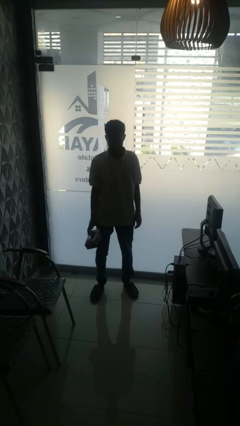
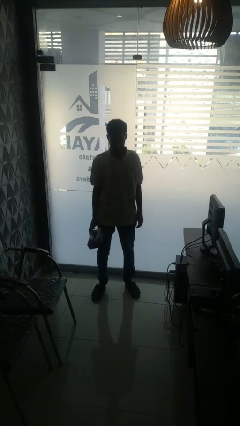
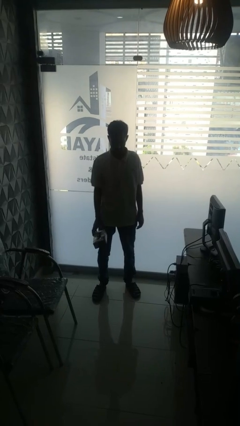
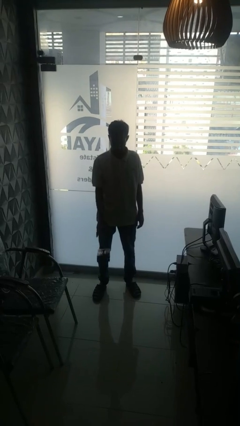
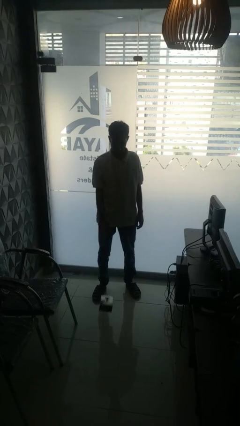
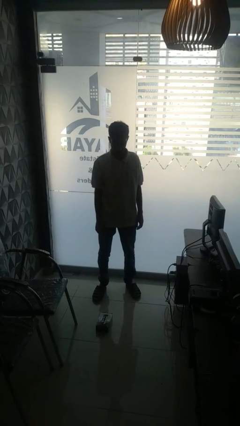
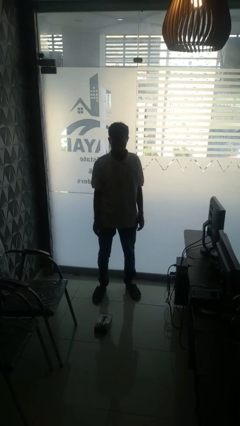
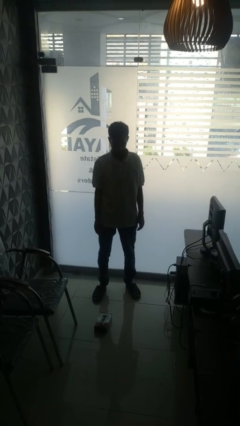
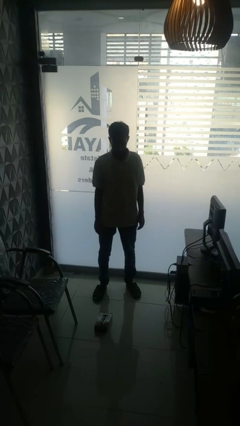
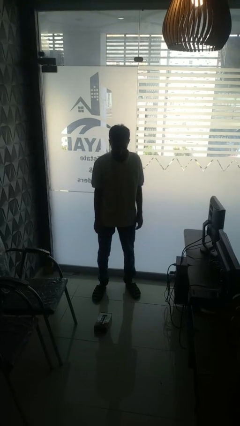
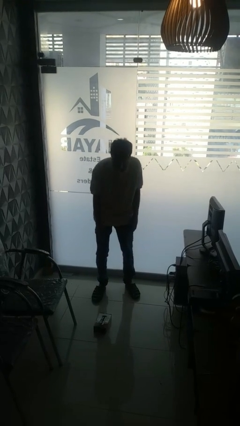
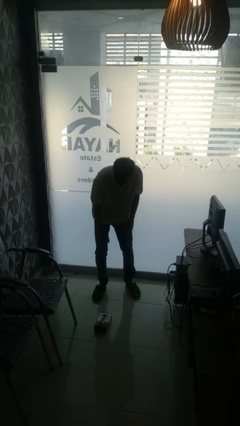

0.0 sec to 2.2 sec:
person throws object to ground

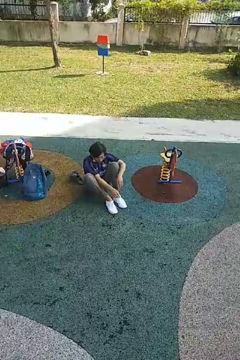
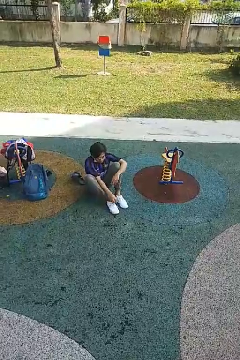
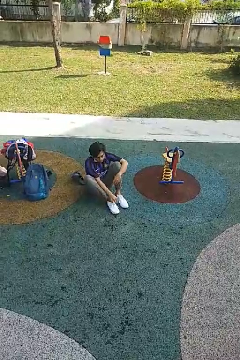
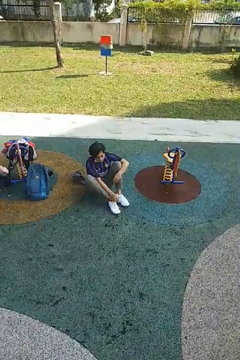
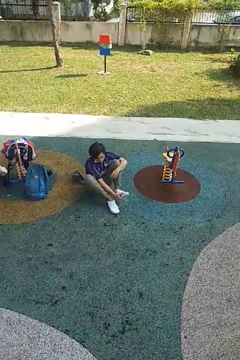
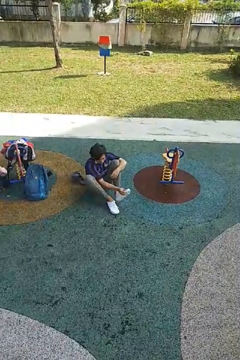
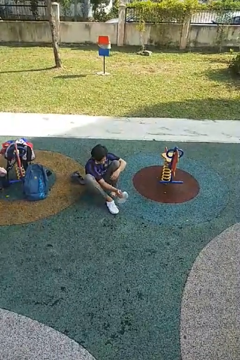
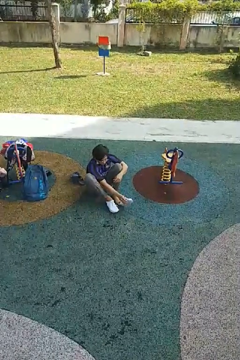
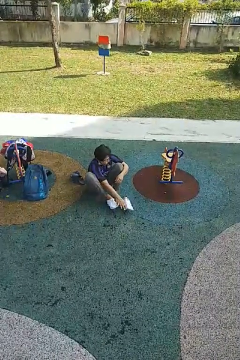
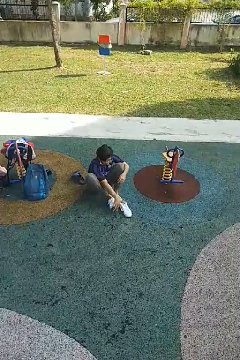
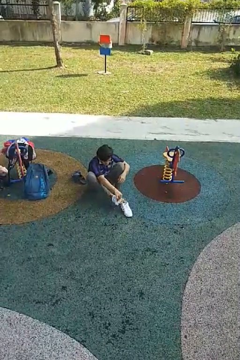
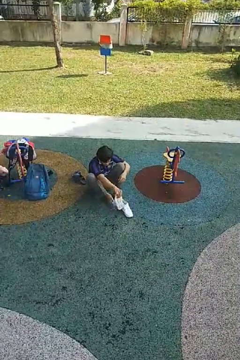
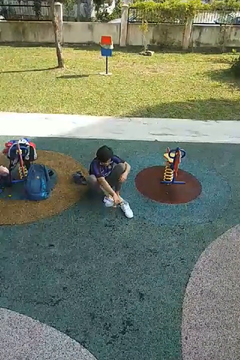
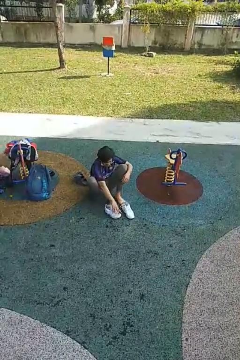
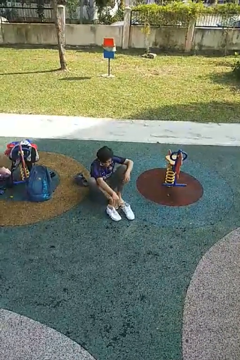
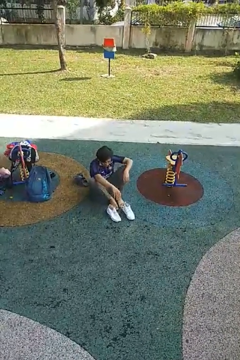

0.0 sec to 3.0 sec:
person takes off shoes

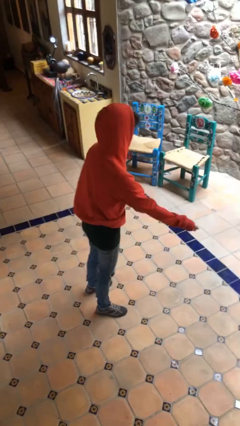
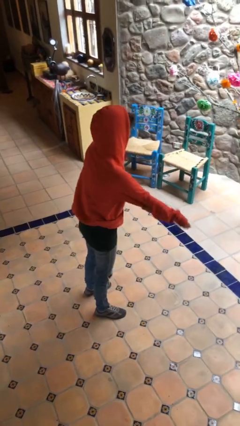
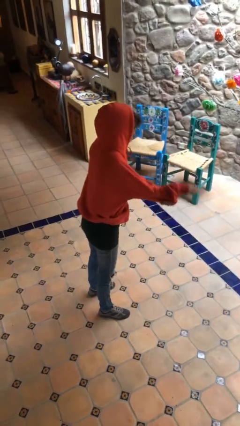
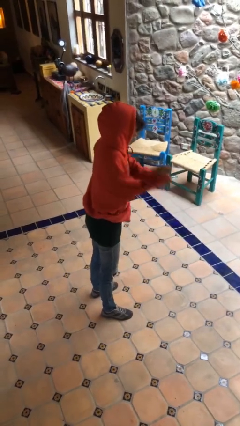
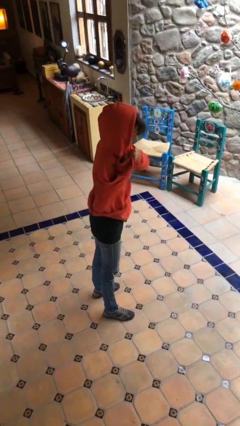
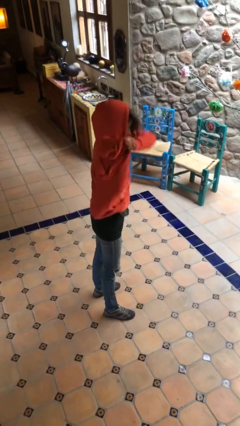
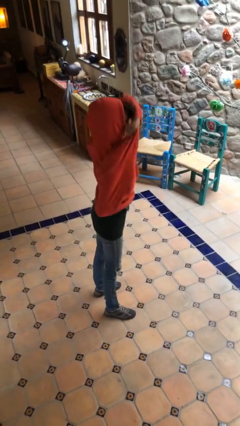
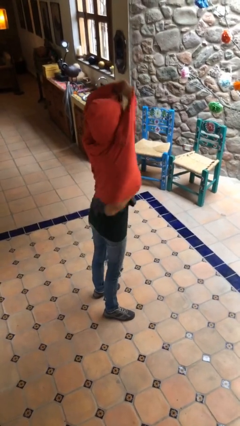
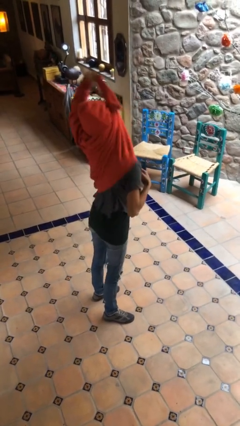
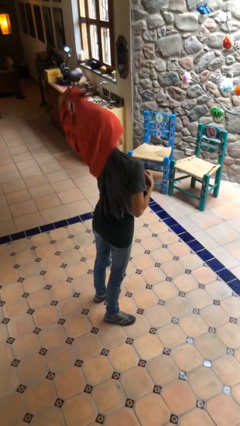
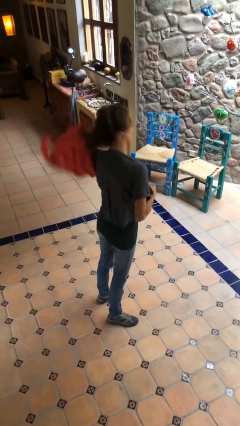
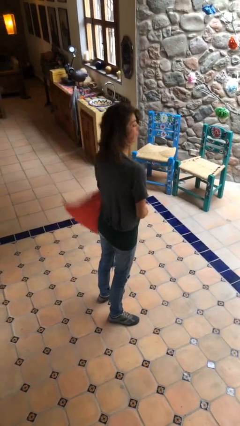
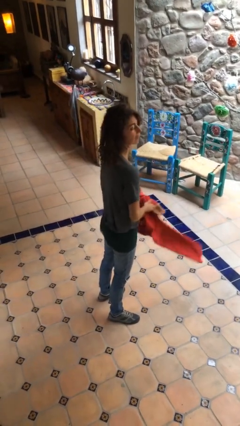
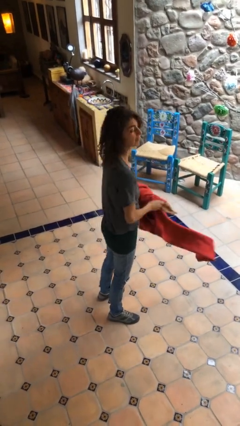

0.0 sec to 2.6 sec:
person takes off hoodie

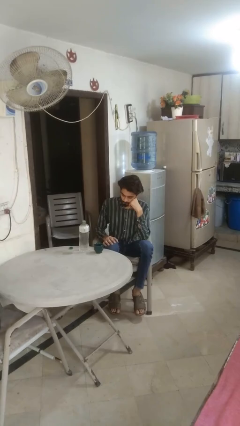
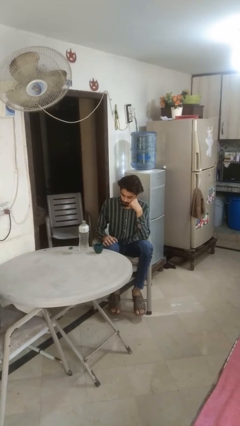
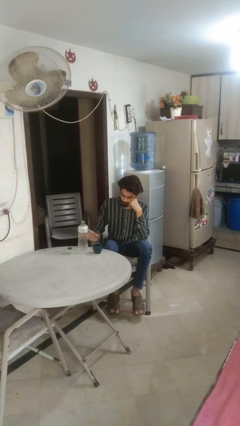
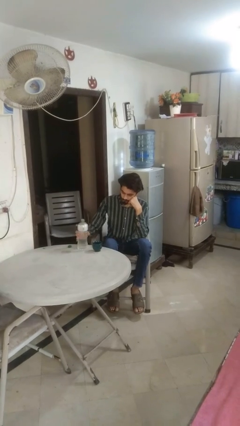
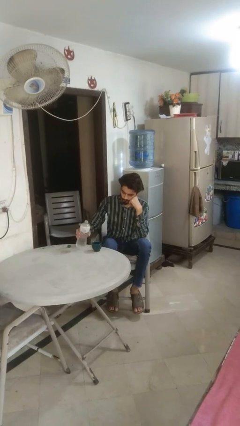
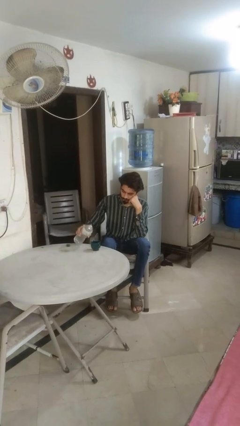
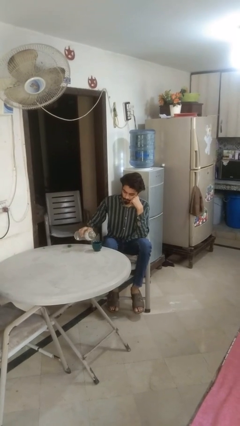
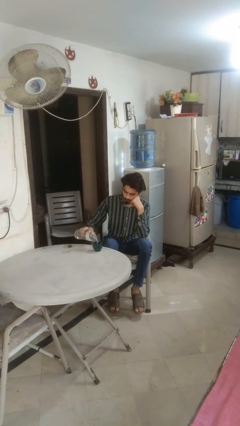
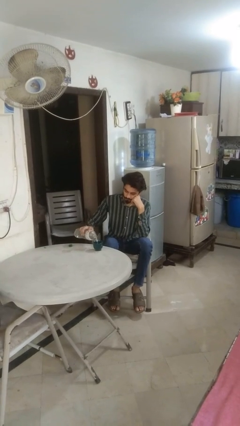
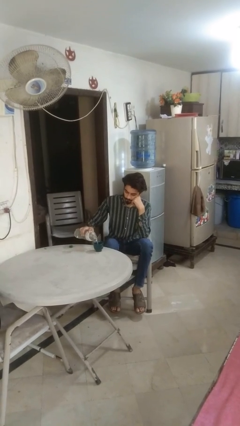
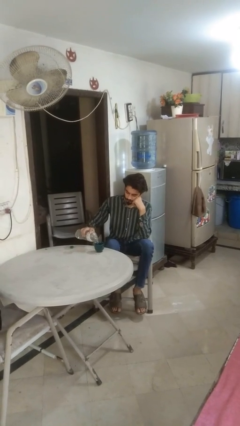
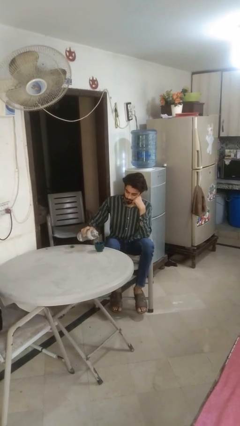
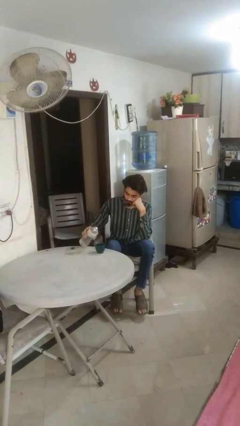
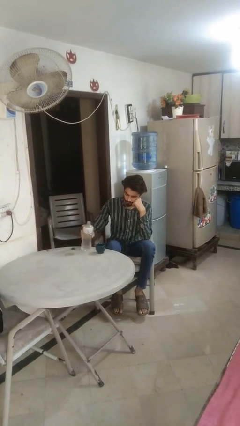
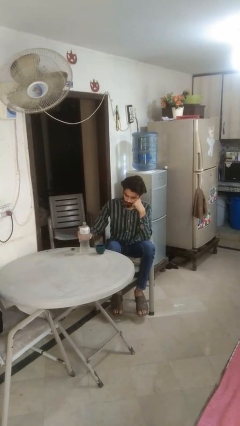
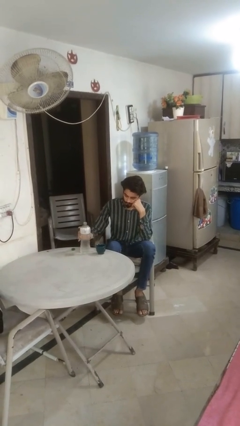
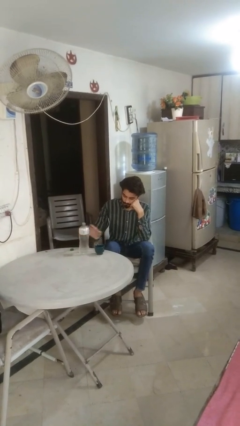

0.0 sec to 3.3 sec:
person pours liquid into cup

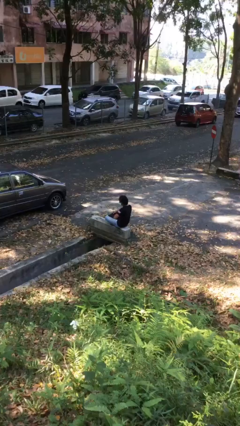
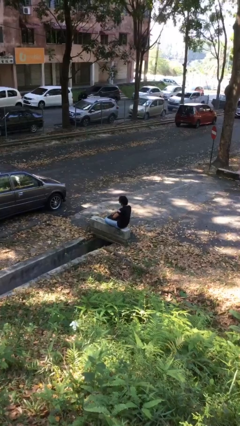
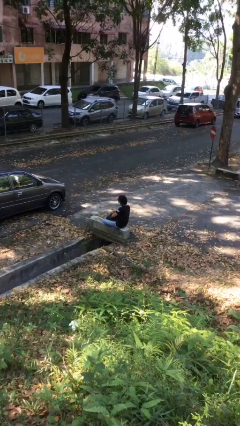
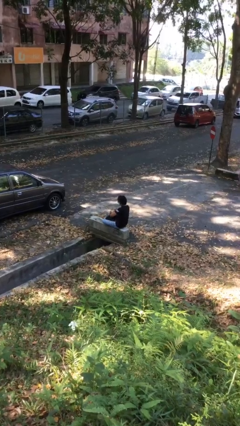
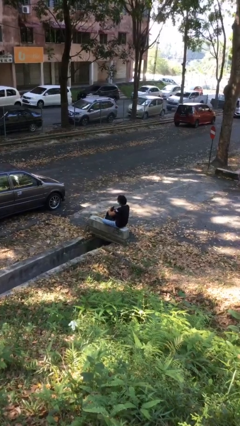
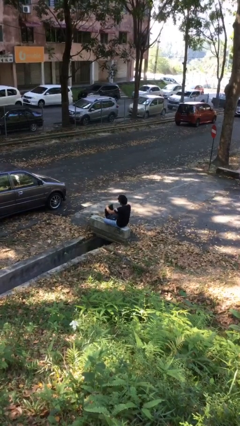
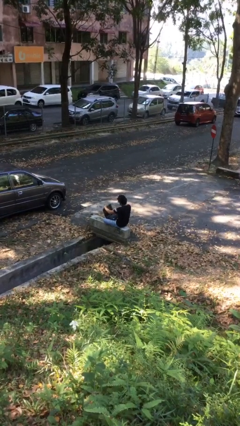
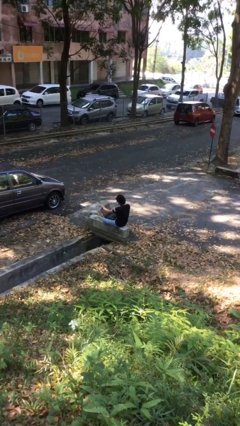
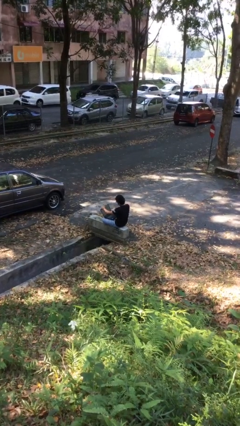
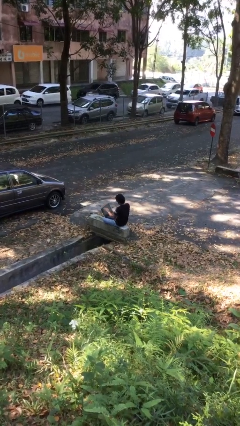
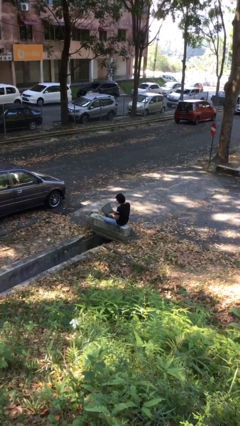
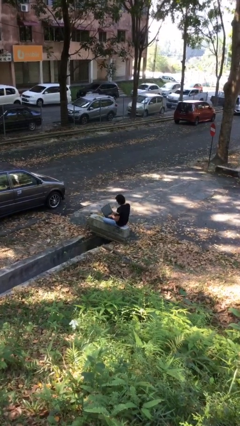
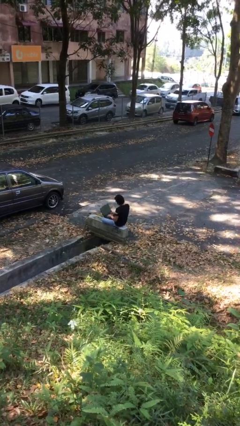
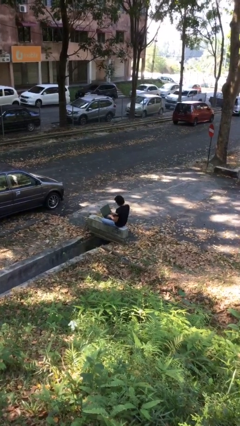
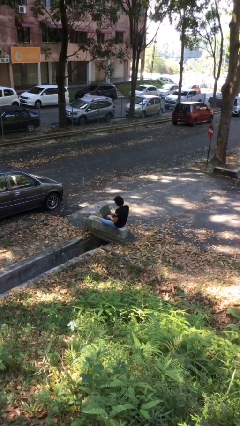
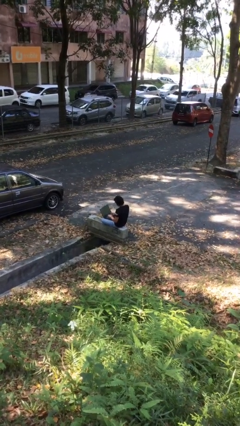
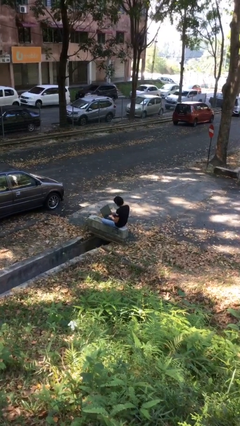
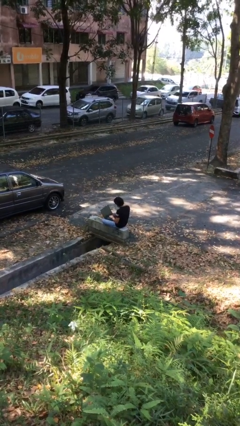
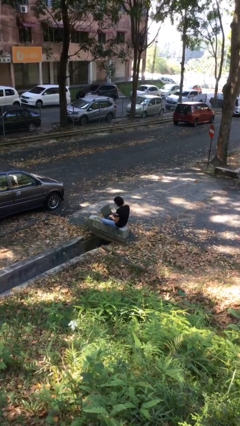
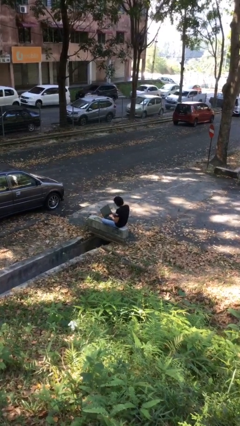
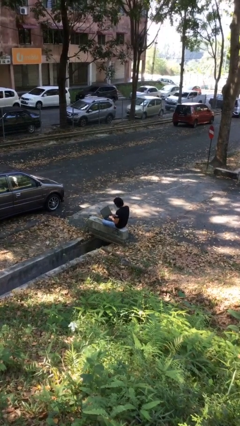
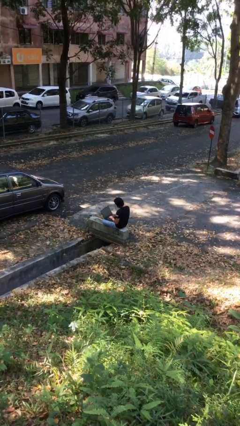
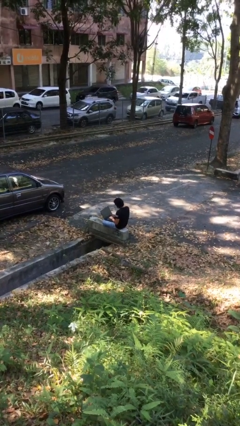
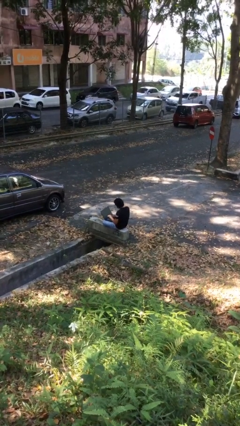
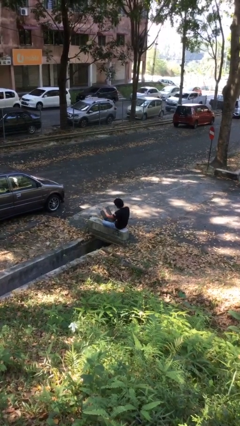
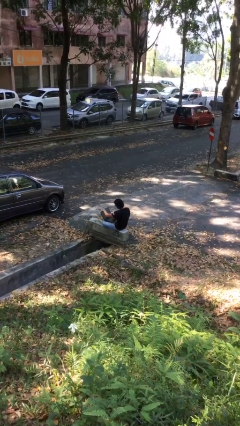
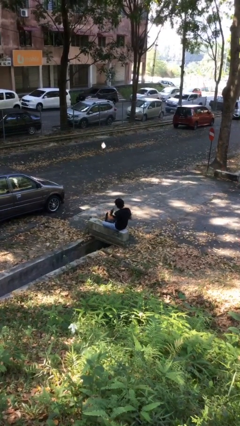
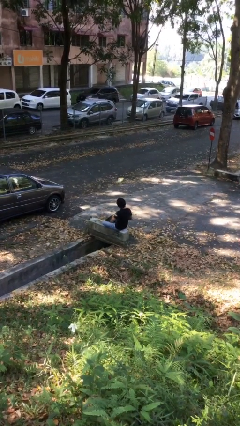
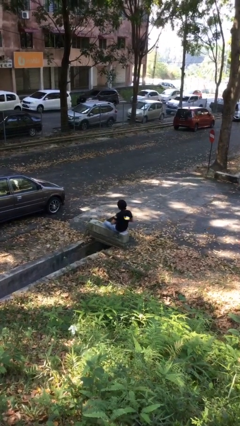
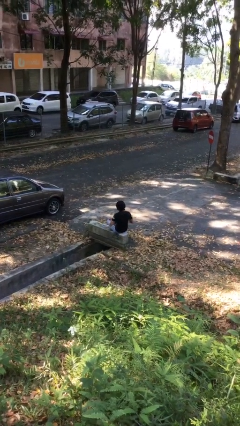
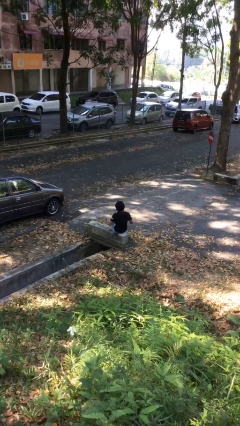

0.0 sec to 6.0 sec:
person interacts with laptop

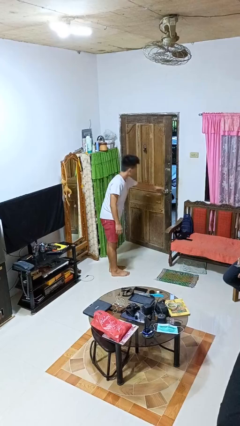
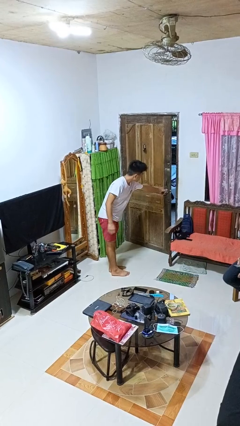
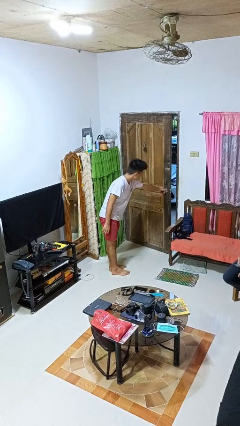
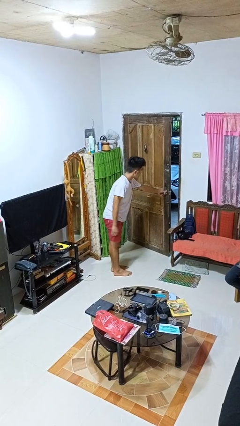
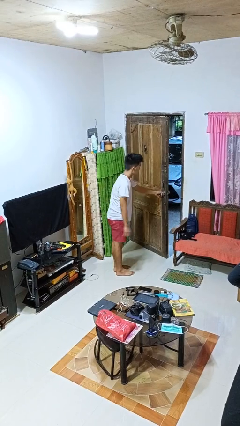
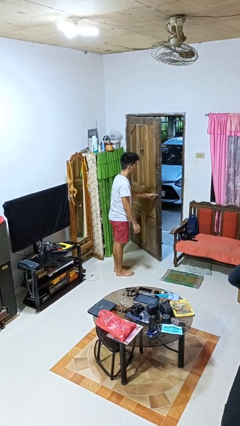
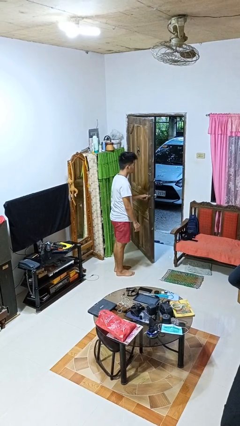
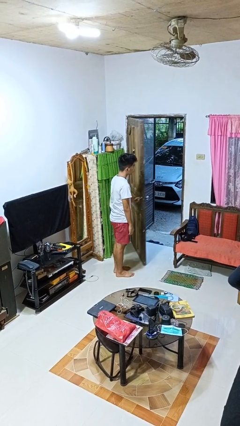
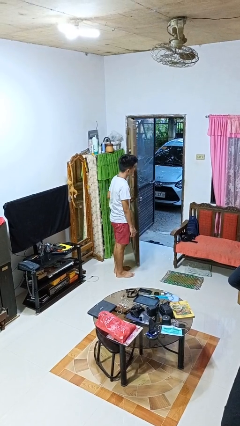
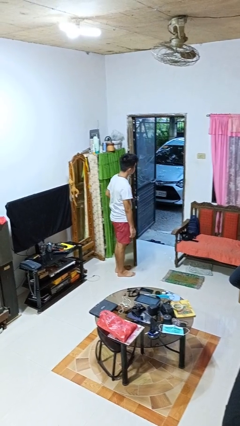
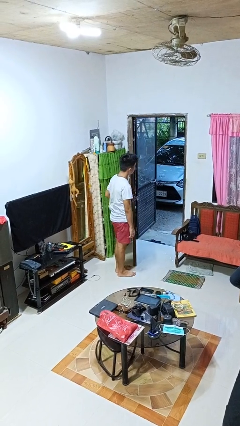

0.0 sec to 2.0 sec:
person opens facility door
